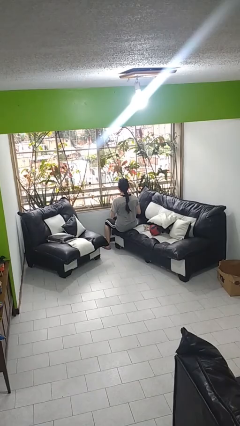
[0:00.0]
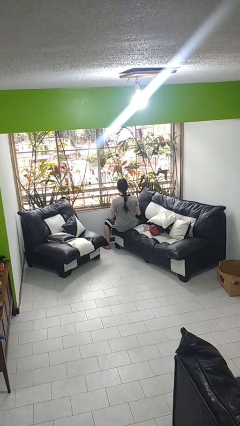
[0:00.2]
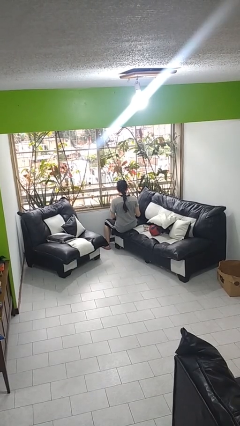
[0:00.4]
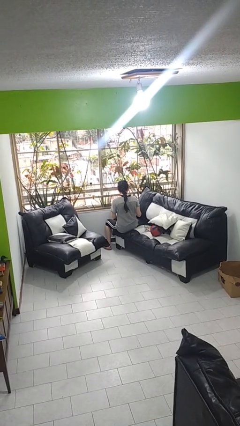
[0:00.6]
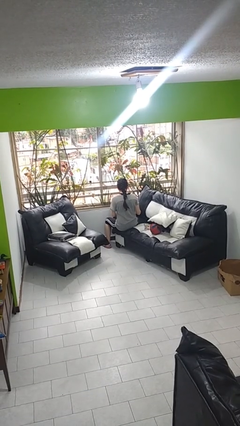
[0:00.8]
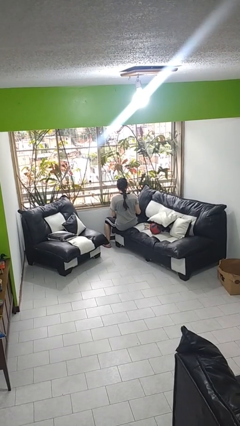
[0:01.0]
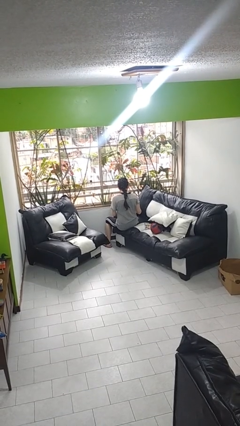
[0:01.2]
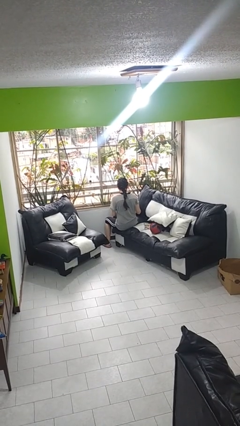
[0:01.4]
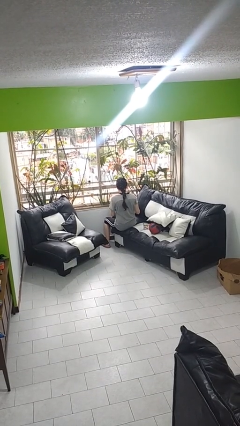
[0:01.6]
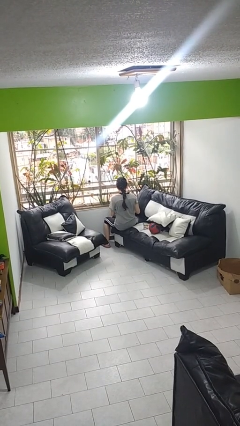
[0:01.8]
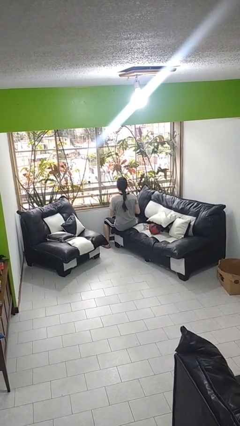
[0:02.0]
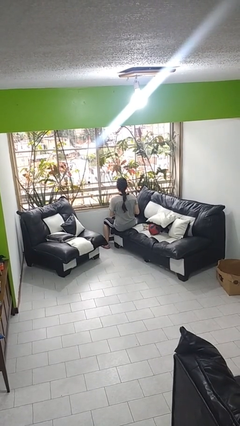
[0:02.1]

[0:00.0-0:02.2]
person reads book

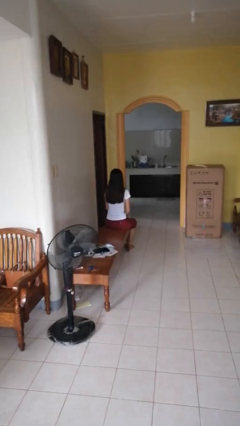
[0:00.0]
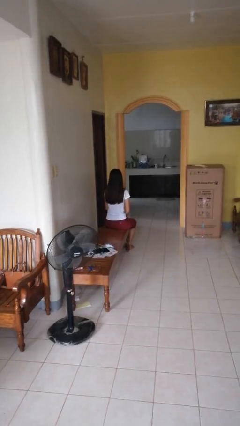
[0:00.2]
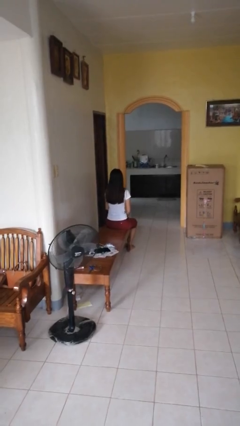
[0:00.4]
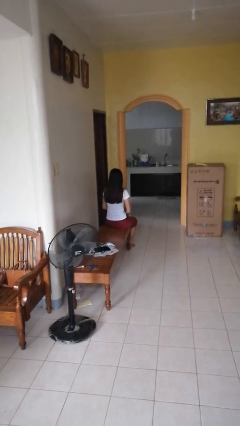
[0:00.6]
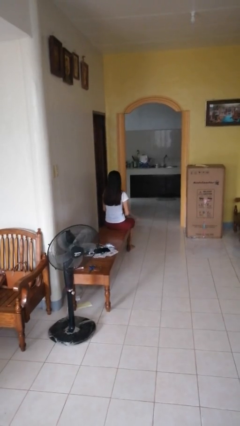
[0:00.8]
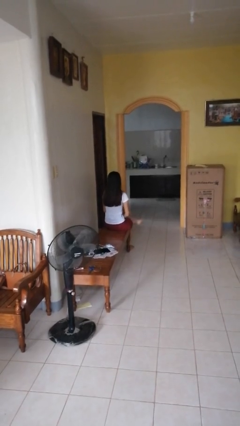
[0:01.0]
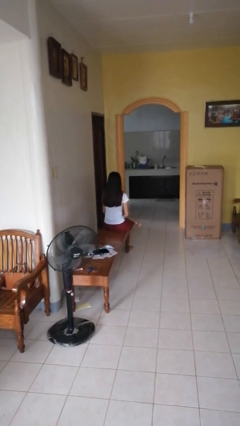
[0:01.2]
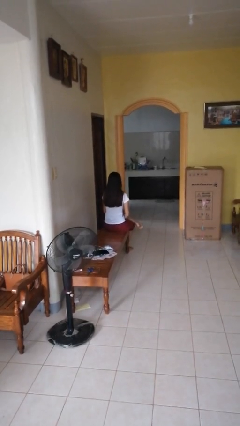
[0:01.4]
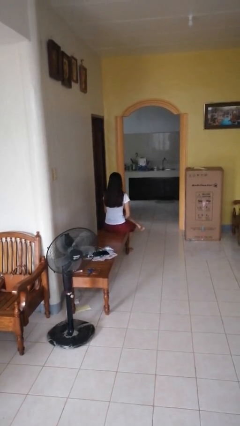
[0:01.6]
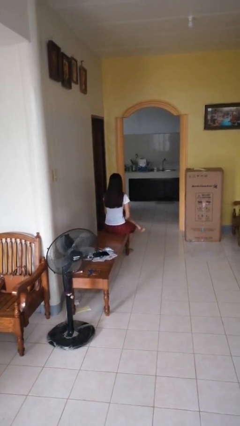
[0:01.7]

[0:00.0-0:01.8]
person crosses legs

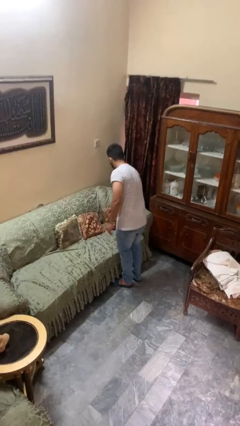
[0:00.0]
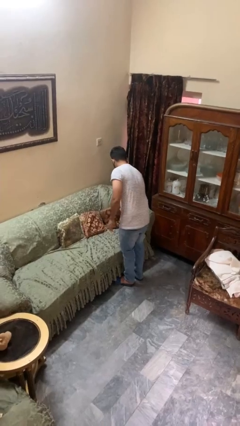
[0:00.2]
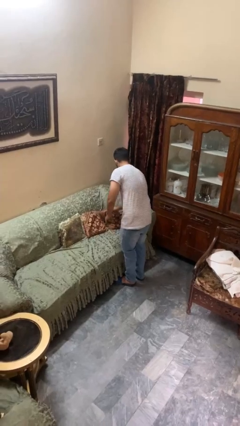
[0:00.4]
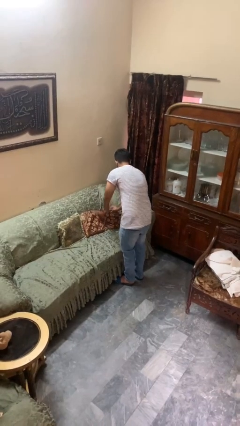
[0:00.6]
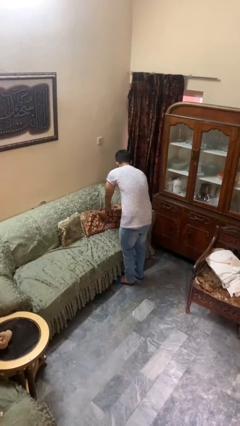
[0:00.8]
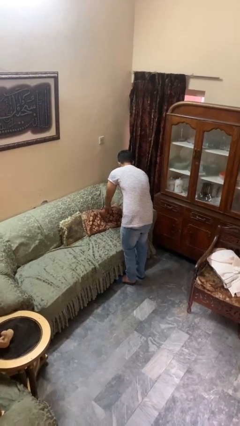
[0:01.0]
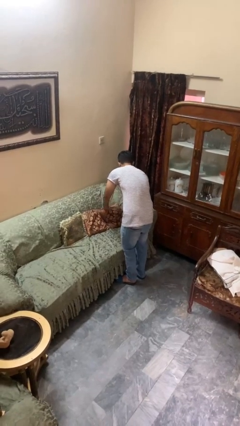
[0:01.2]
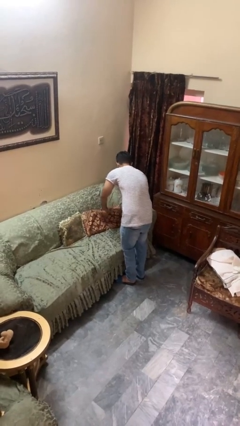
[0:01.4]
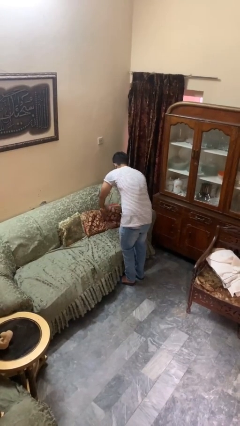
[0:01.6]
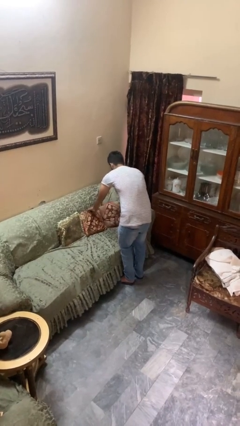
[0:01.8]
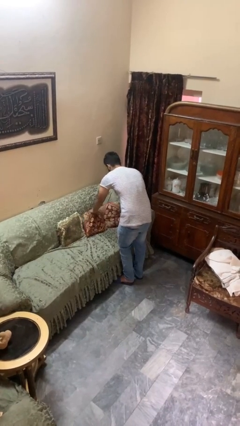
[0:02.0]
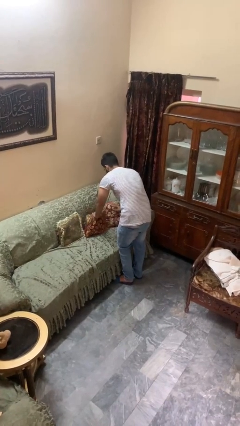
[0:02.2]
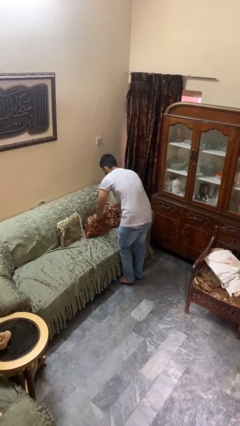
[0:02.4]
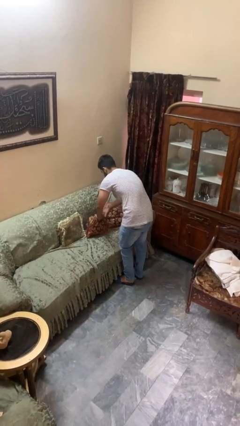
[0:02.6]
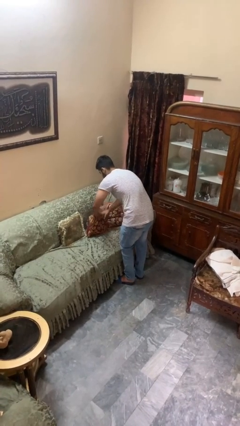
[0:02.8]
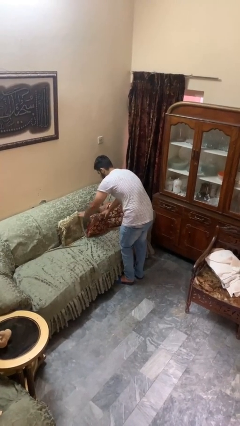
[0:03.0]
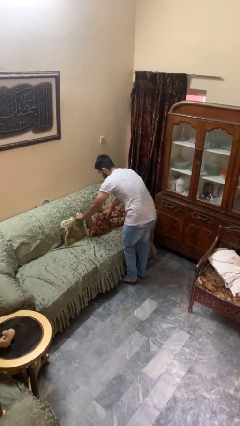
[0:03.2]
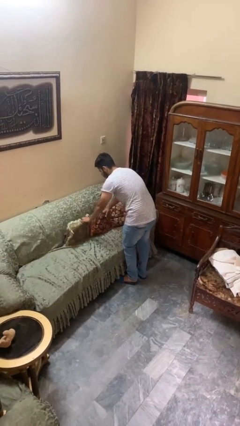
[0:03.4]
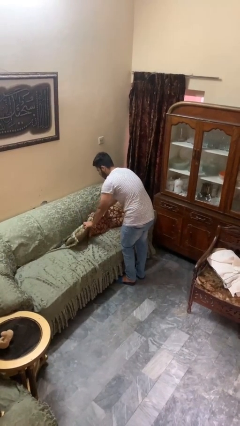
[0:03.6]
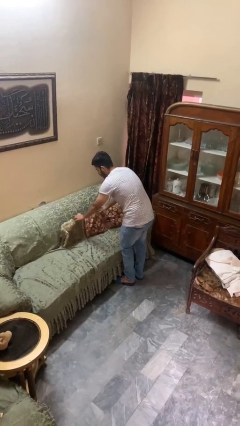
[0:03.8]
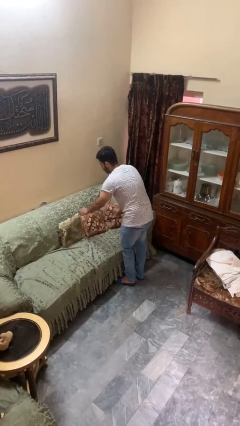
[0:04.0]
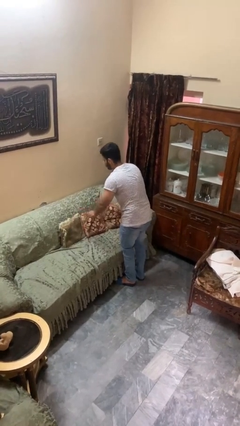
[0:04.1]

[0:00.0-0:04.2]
person searches in couch

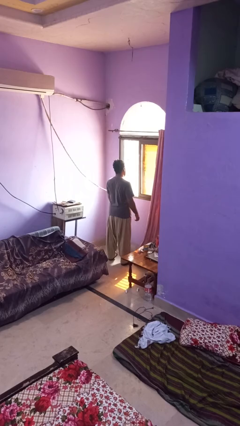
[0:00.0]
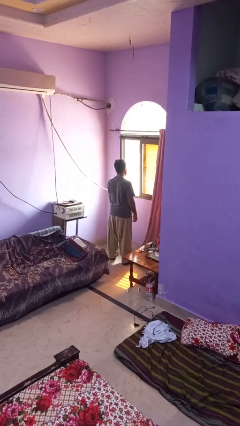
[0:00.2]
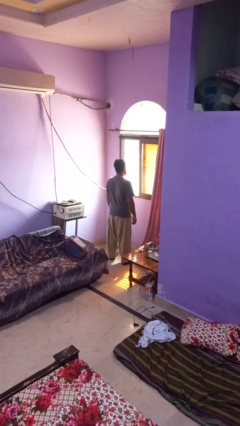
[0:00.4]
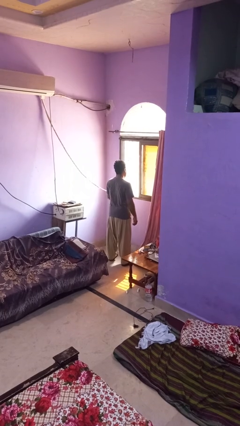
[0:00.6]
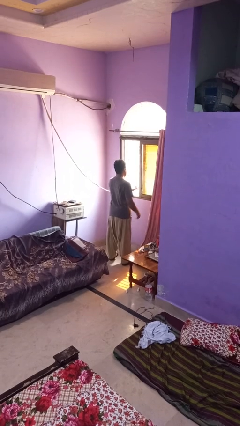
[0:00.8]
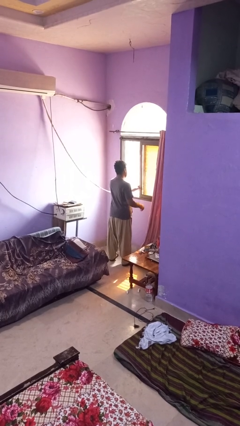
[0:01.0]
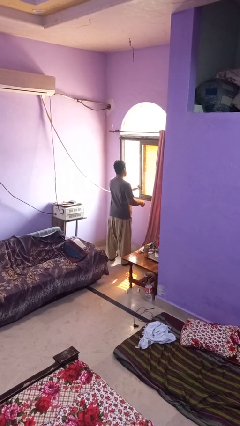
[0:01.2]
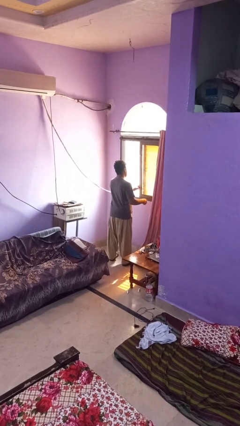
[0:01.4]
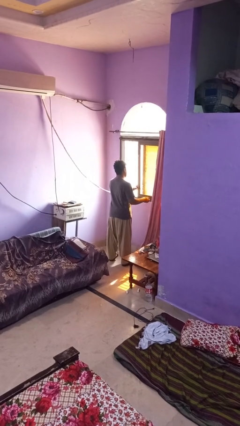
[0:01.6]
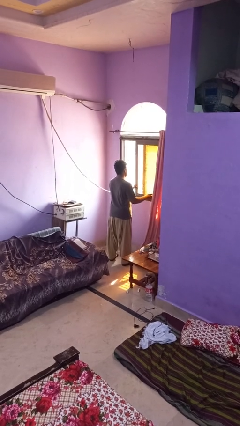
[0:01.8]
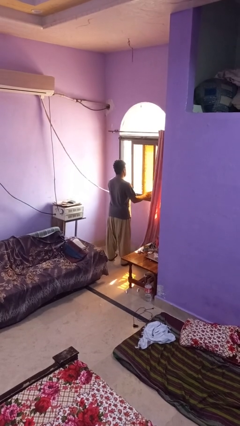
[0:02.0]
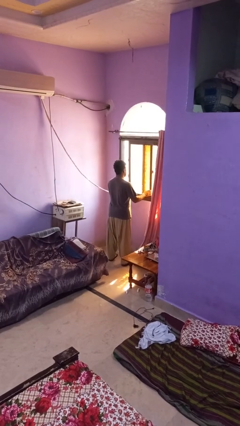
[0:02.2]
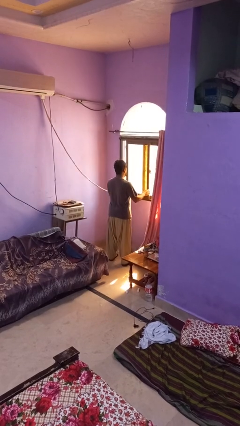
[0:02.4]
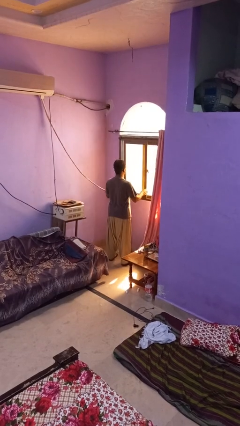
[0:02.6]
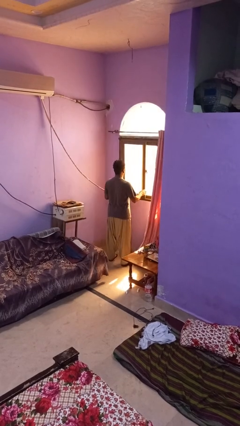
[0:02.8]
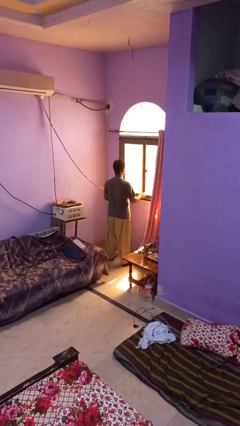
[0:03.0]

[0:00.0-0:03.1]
person closes home window

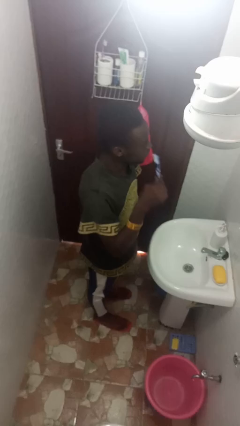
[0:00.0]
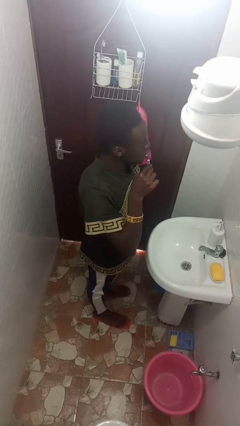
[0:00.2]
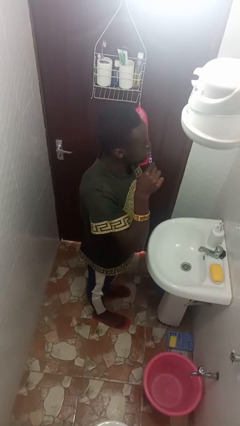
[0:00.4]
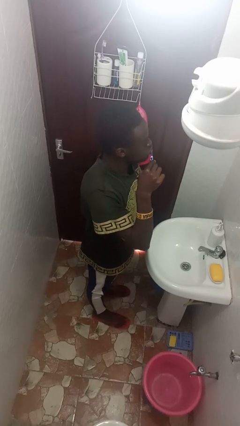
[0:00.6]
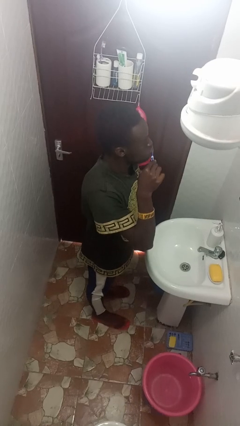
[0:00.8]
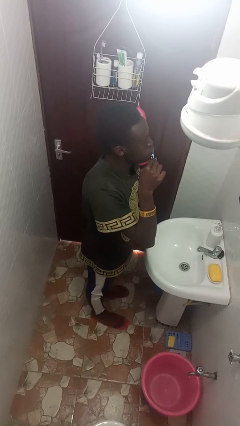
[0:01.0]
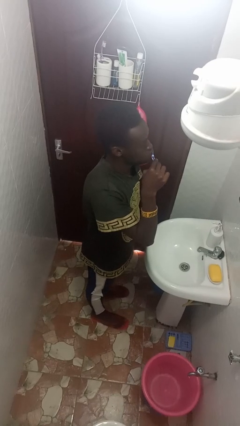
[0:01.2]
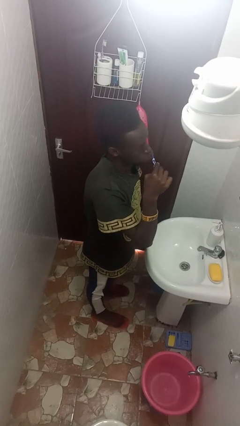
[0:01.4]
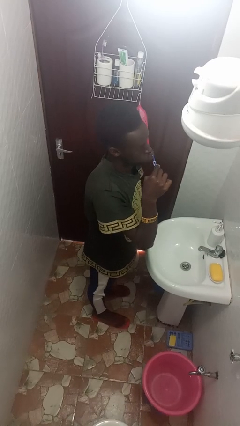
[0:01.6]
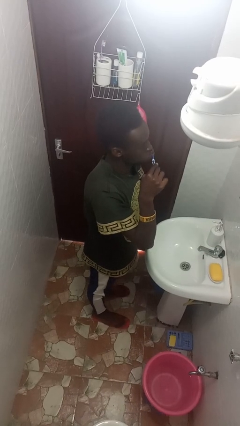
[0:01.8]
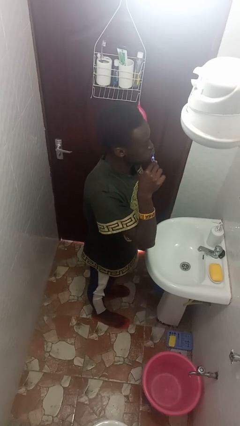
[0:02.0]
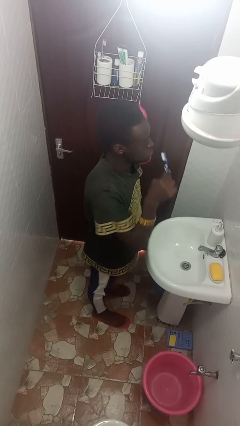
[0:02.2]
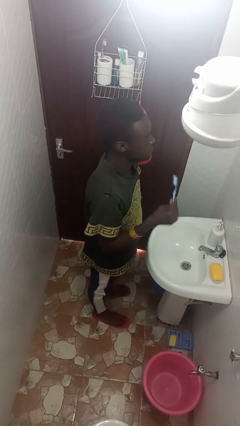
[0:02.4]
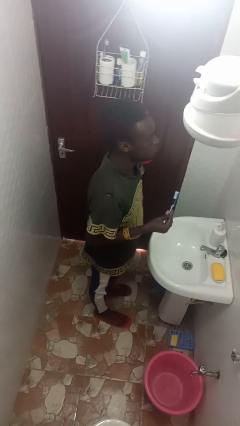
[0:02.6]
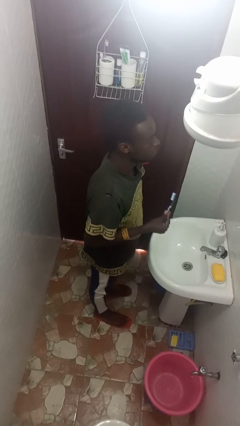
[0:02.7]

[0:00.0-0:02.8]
person brushes teeth

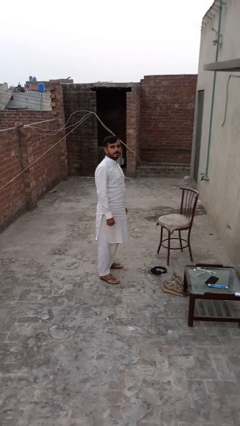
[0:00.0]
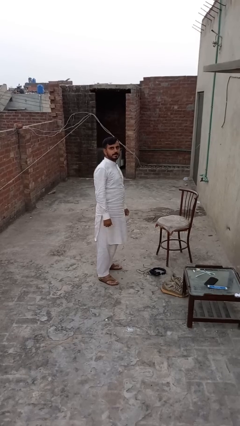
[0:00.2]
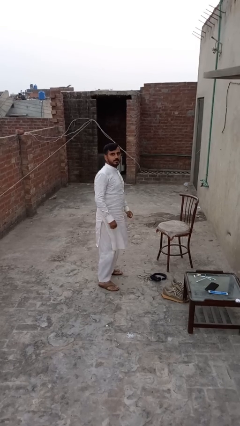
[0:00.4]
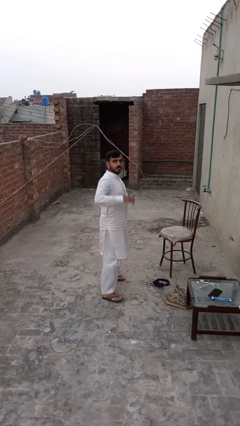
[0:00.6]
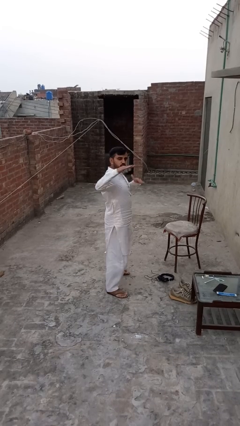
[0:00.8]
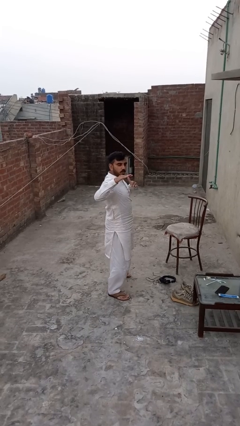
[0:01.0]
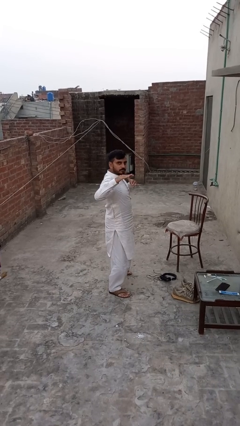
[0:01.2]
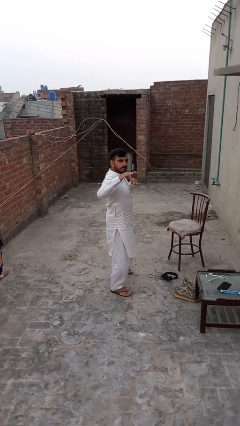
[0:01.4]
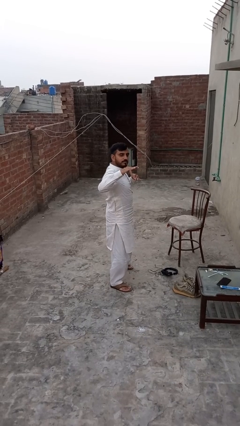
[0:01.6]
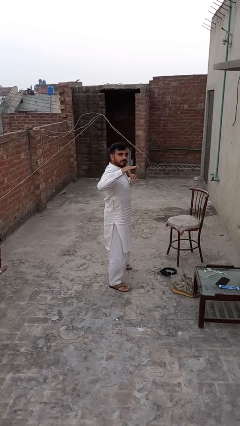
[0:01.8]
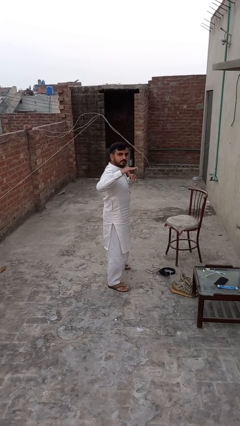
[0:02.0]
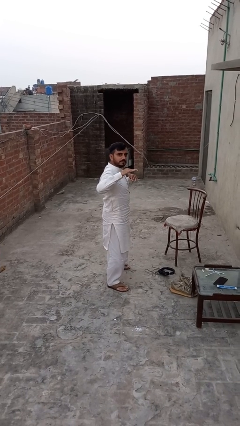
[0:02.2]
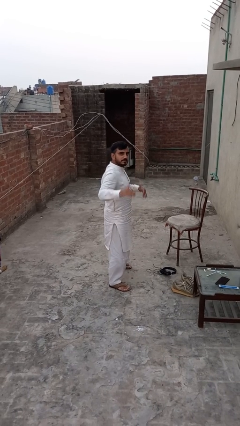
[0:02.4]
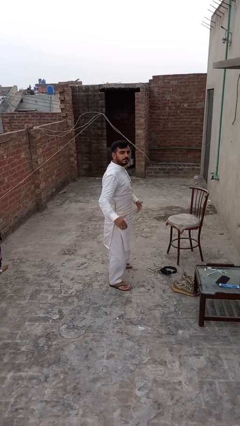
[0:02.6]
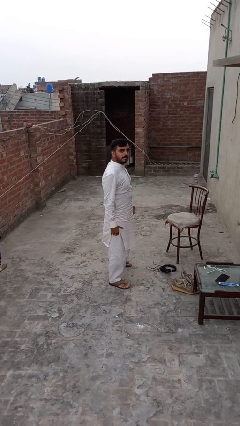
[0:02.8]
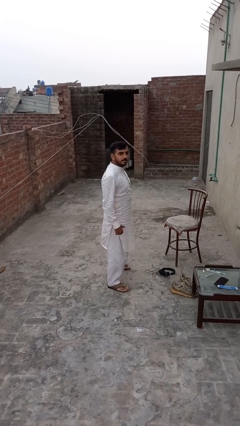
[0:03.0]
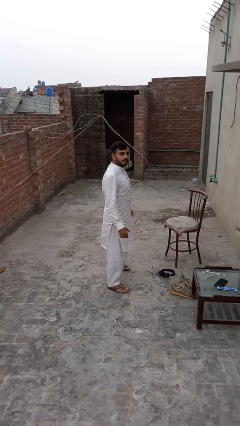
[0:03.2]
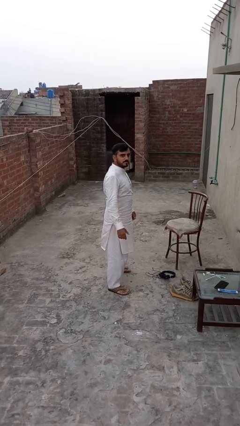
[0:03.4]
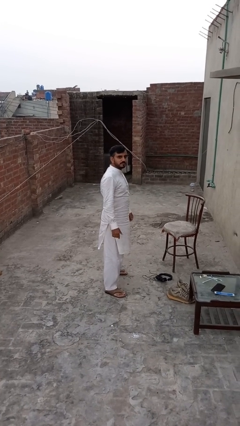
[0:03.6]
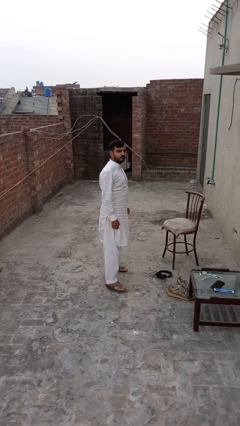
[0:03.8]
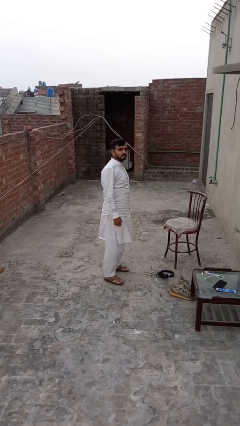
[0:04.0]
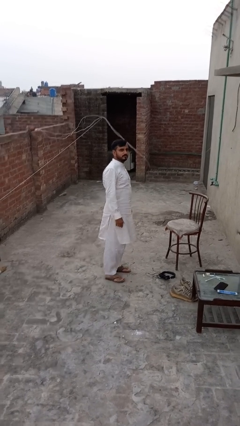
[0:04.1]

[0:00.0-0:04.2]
person karate chop
